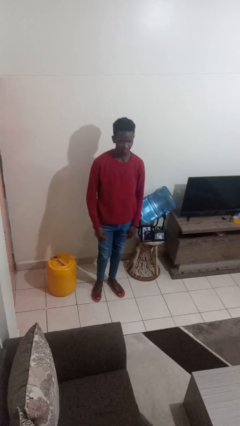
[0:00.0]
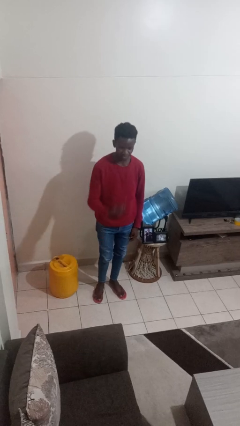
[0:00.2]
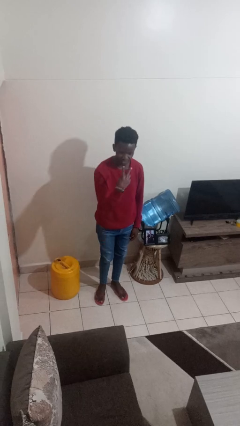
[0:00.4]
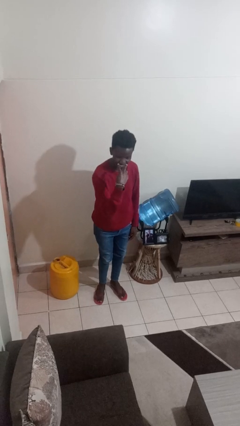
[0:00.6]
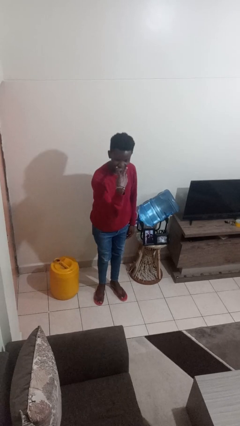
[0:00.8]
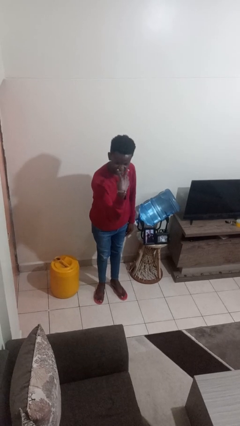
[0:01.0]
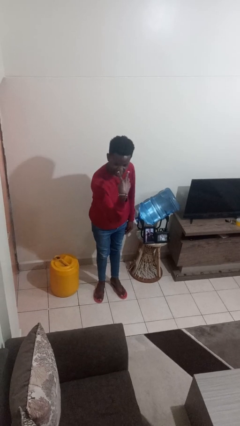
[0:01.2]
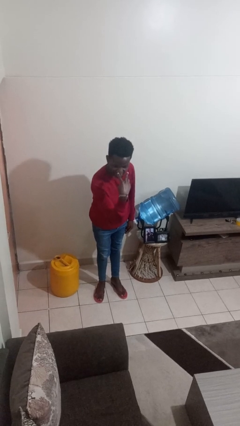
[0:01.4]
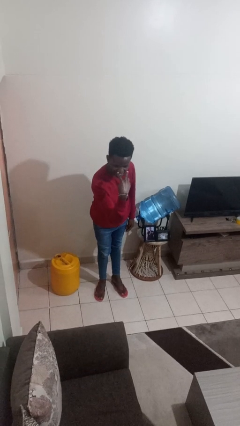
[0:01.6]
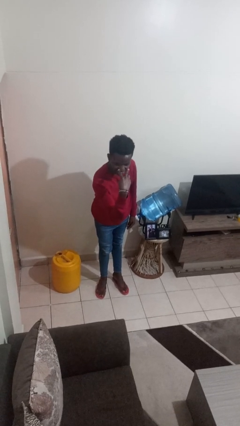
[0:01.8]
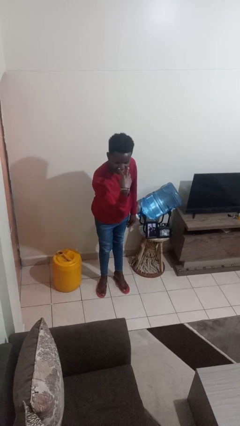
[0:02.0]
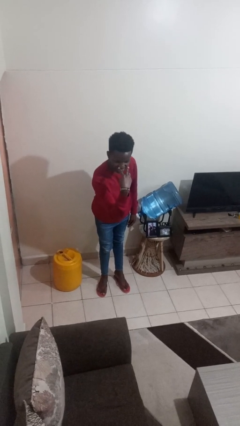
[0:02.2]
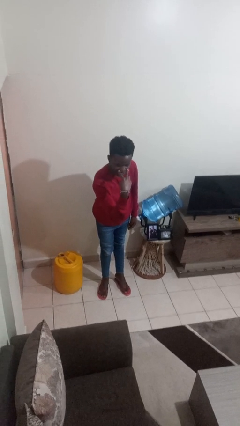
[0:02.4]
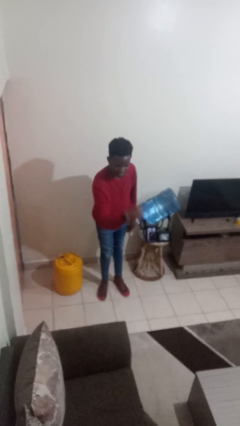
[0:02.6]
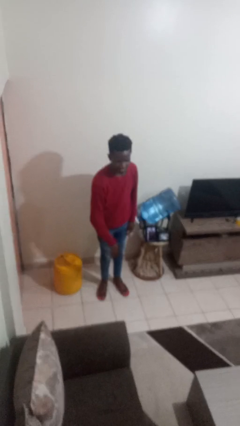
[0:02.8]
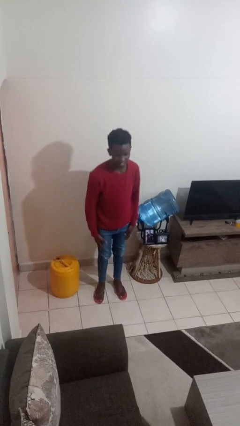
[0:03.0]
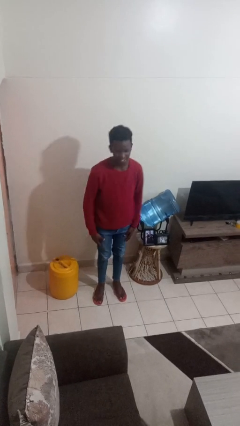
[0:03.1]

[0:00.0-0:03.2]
person gestures watch closely

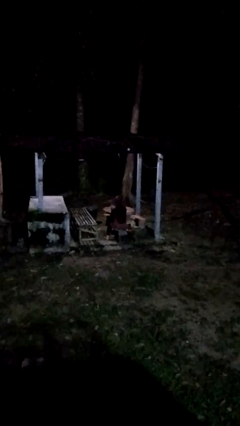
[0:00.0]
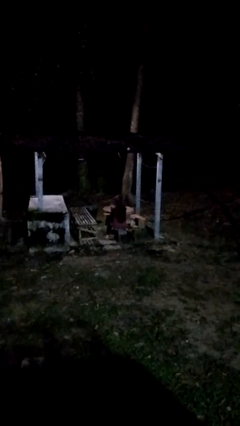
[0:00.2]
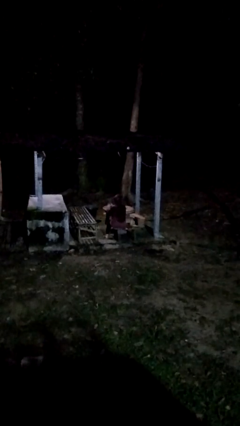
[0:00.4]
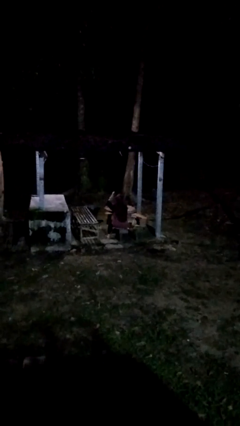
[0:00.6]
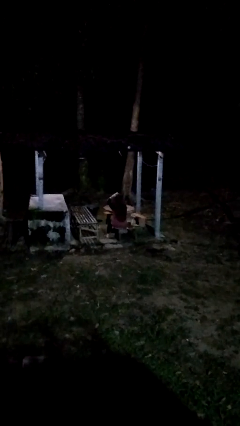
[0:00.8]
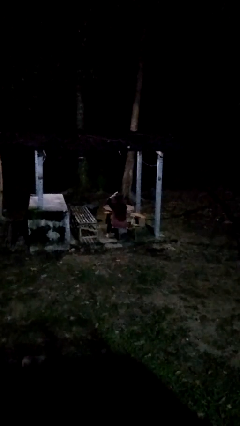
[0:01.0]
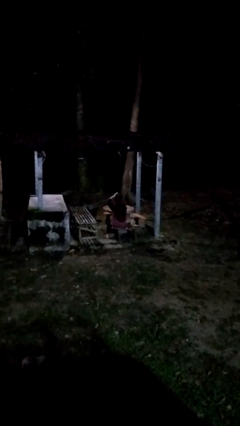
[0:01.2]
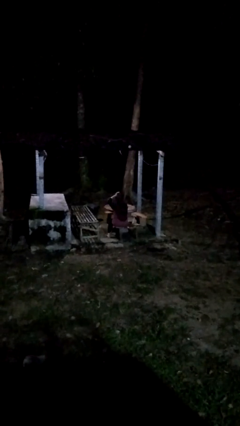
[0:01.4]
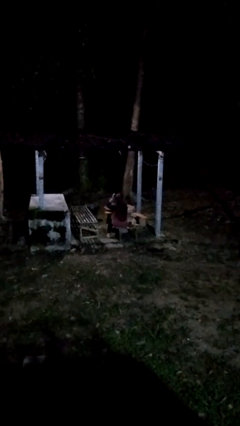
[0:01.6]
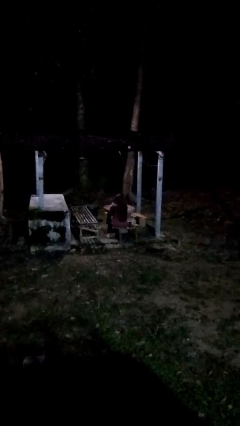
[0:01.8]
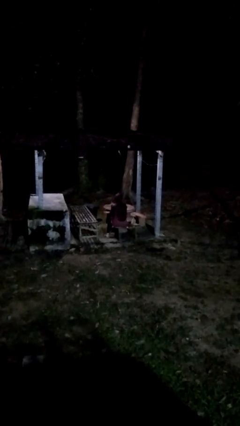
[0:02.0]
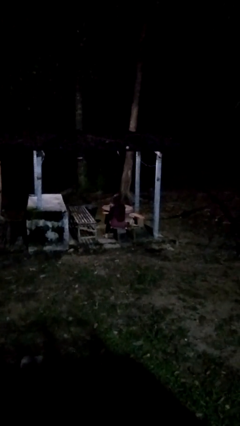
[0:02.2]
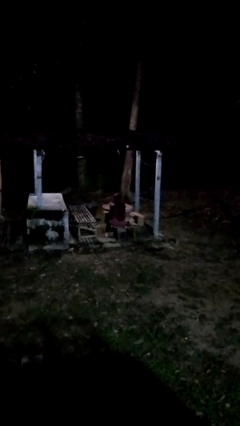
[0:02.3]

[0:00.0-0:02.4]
person pats head

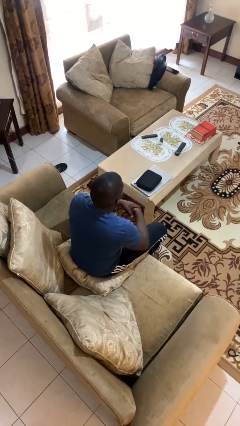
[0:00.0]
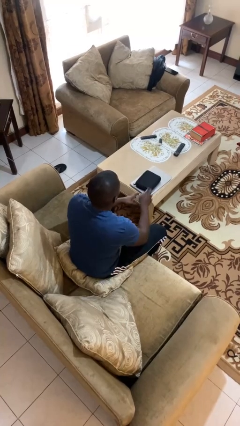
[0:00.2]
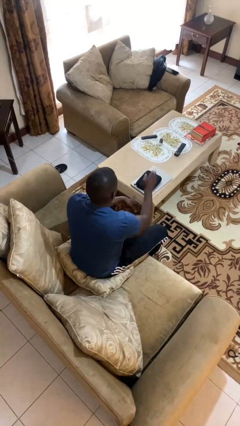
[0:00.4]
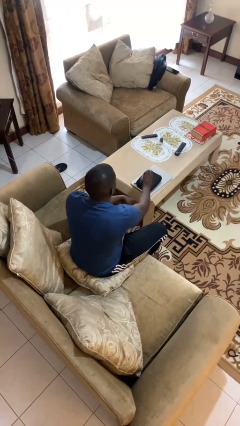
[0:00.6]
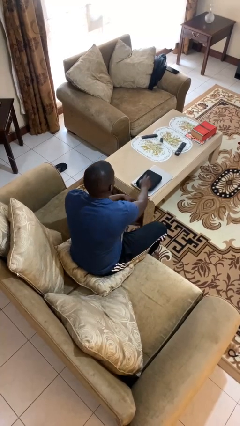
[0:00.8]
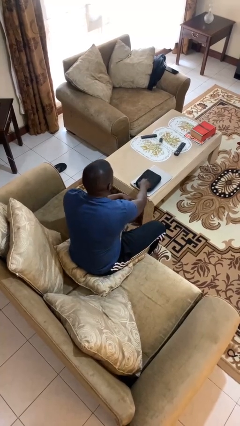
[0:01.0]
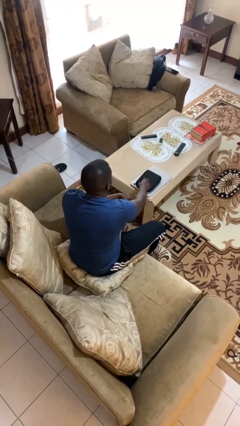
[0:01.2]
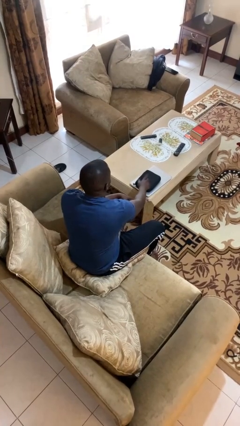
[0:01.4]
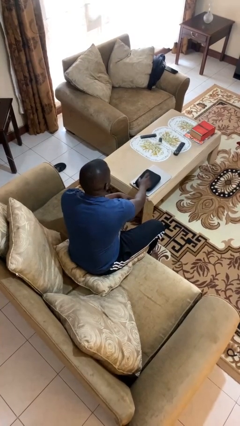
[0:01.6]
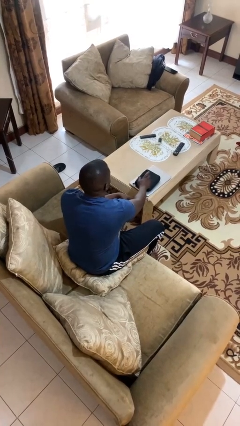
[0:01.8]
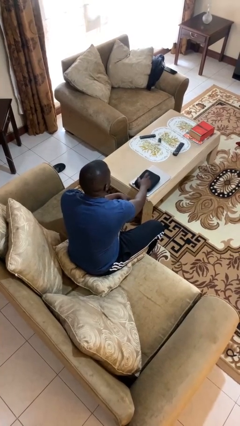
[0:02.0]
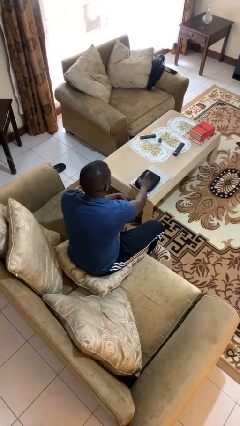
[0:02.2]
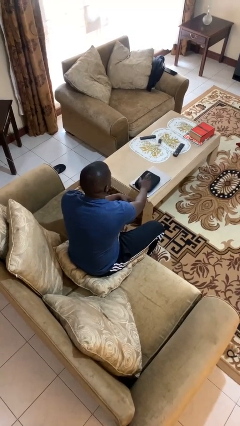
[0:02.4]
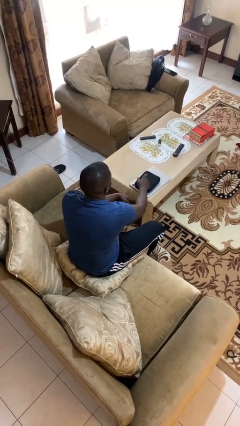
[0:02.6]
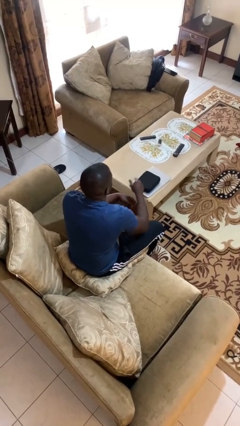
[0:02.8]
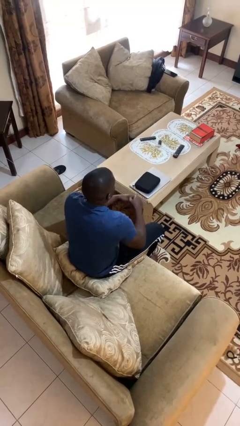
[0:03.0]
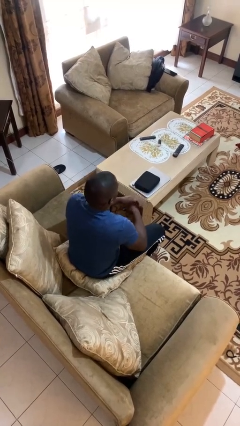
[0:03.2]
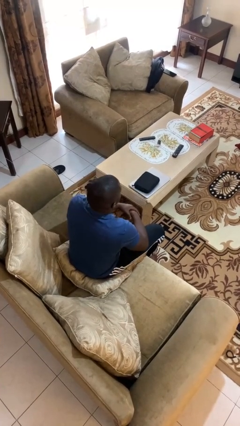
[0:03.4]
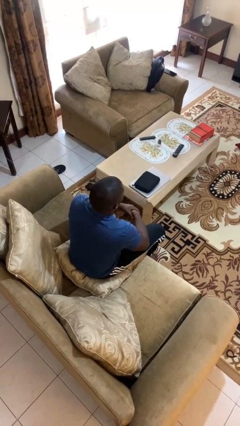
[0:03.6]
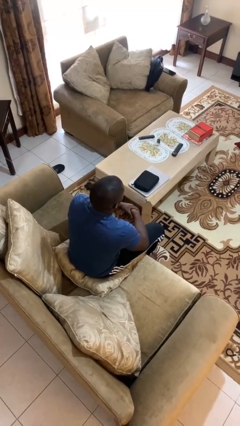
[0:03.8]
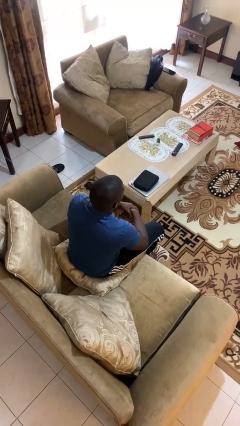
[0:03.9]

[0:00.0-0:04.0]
person taps object with finger

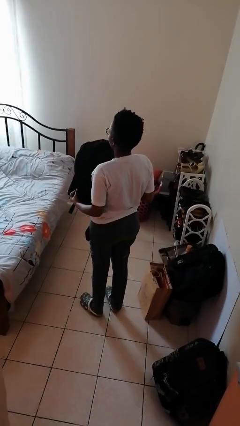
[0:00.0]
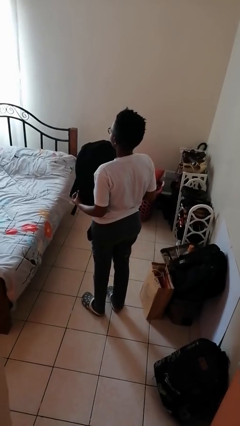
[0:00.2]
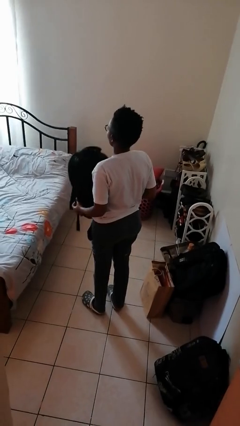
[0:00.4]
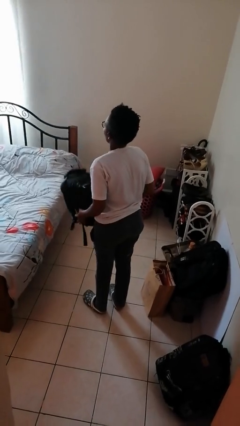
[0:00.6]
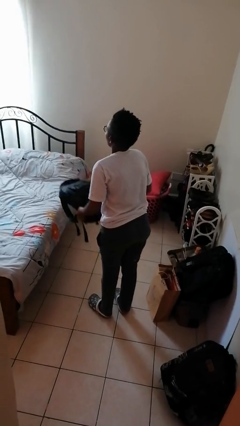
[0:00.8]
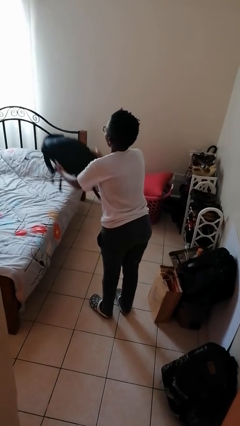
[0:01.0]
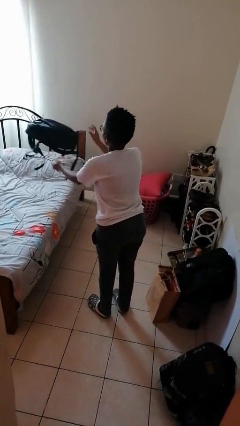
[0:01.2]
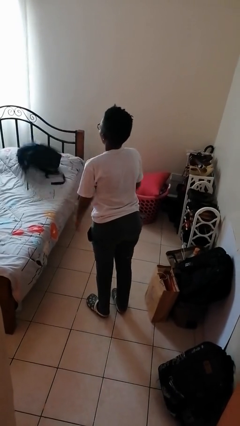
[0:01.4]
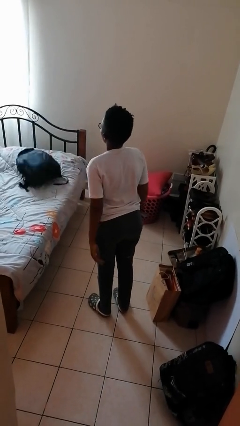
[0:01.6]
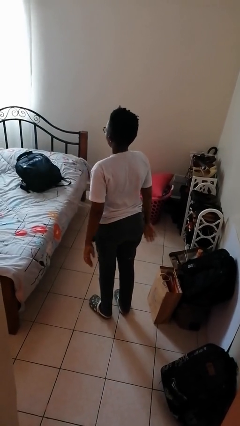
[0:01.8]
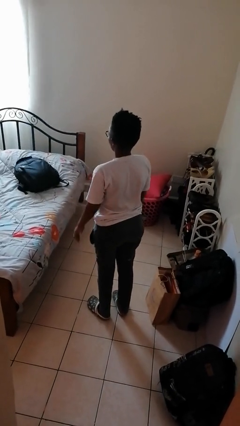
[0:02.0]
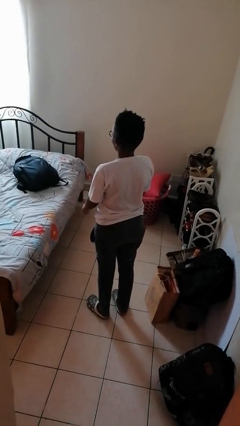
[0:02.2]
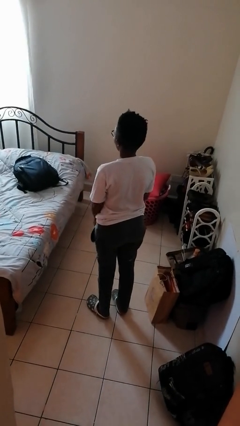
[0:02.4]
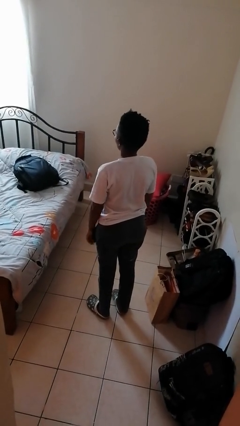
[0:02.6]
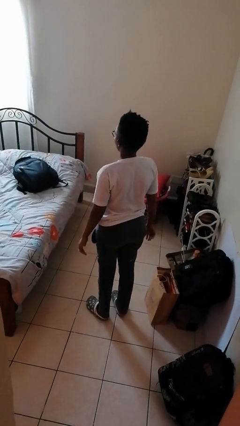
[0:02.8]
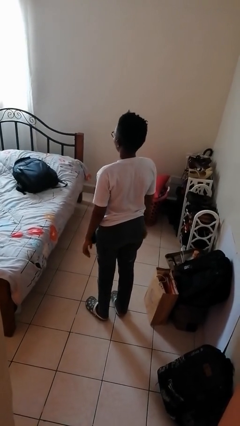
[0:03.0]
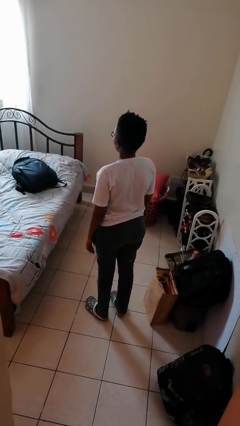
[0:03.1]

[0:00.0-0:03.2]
person throws object on bed

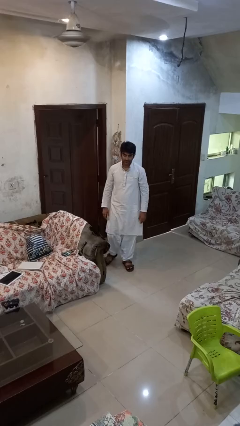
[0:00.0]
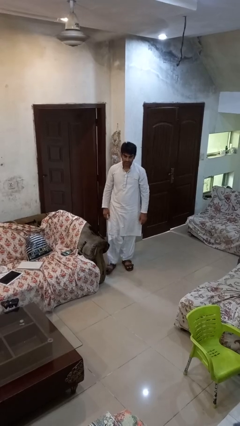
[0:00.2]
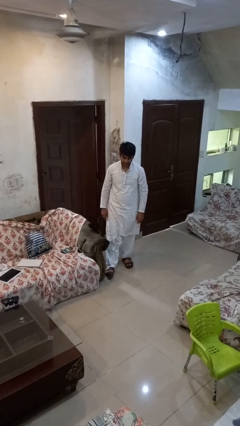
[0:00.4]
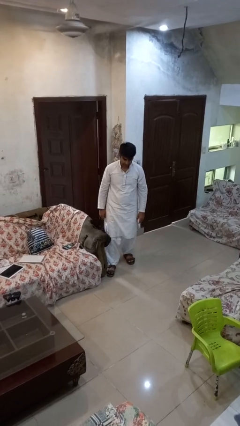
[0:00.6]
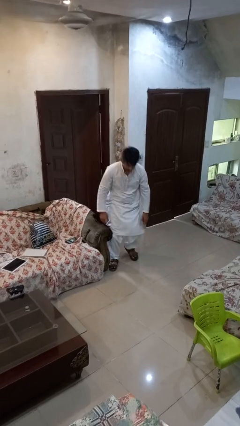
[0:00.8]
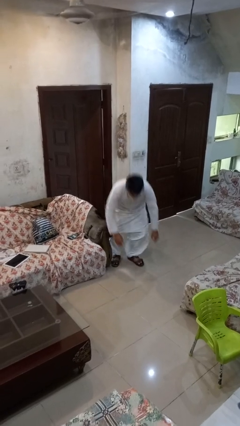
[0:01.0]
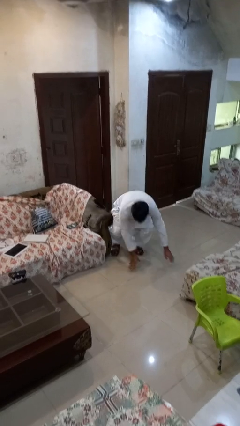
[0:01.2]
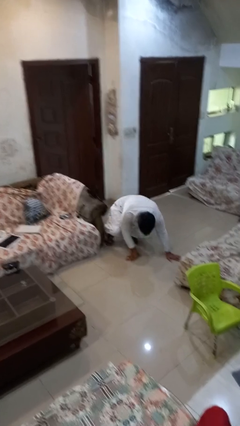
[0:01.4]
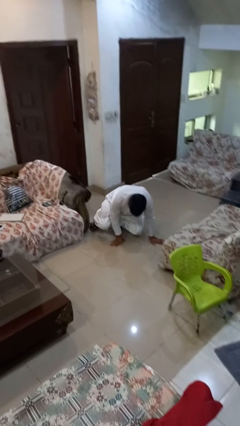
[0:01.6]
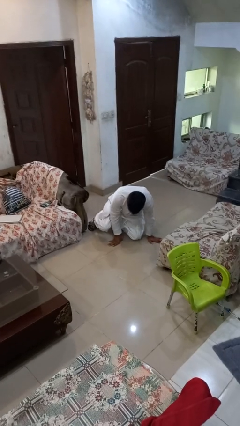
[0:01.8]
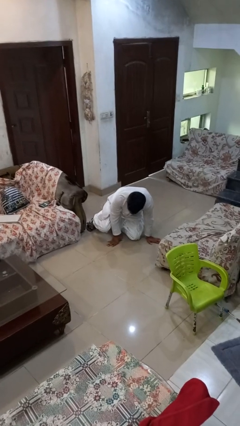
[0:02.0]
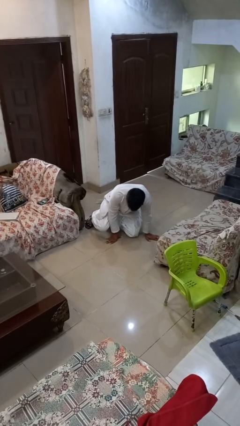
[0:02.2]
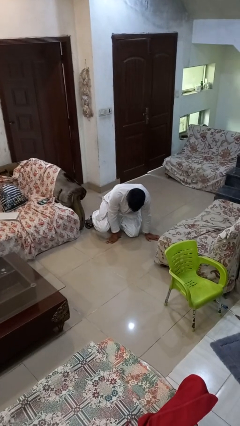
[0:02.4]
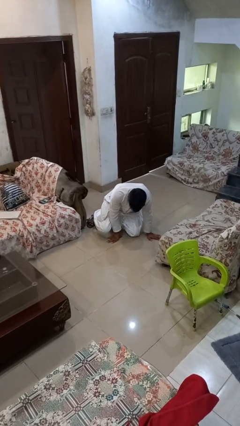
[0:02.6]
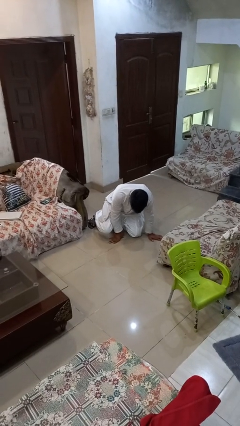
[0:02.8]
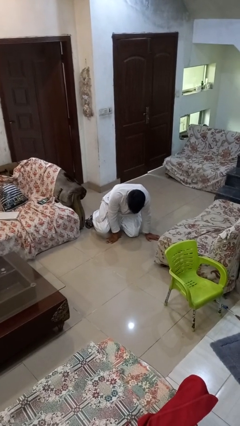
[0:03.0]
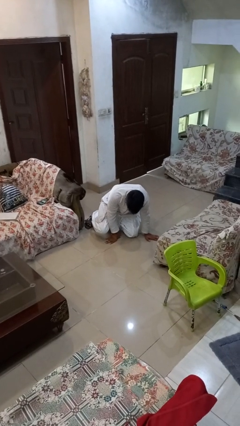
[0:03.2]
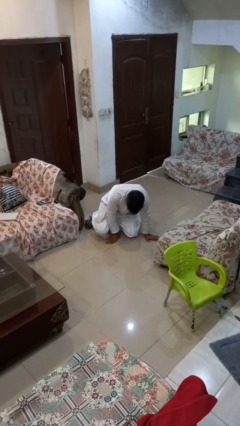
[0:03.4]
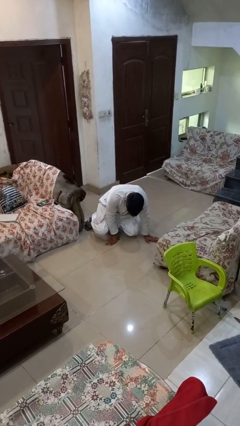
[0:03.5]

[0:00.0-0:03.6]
person trips on object on floor

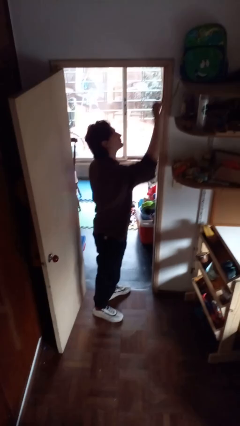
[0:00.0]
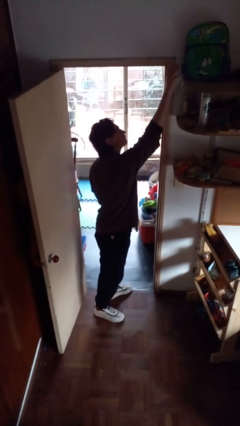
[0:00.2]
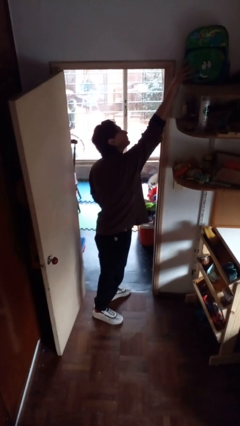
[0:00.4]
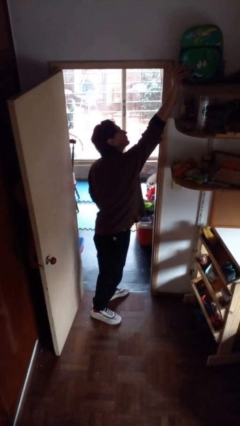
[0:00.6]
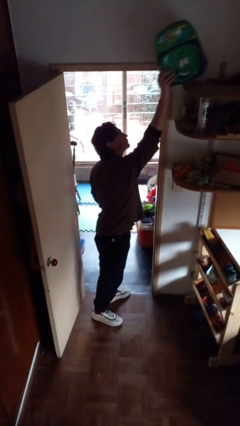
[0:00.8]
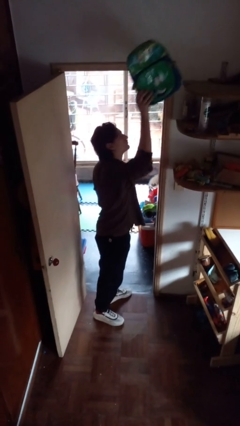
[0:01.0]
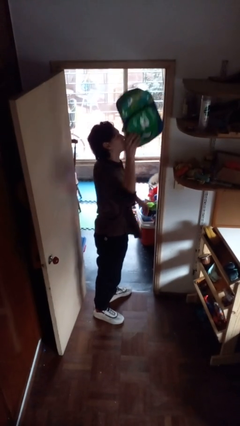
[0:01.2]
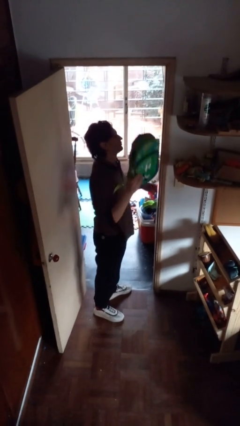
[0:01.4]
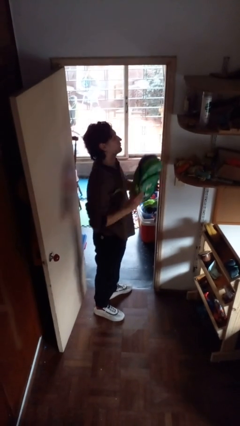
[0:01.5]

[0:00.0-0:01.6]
person puts down object on shelf
